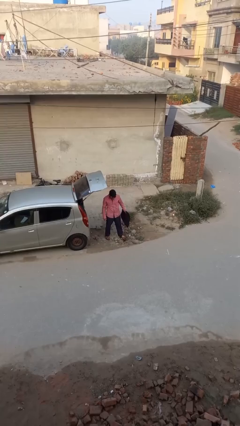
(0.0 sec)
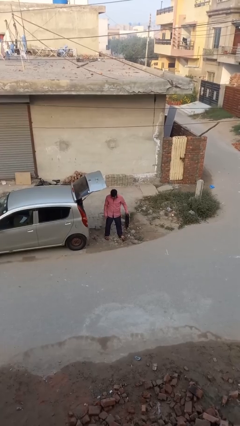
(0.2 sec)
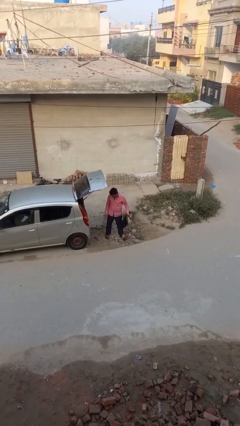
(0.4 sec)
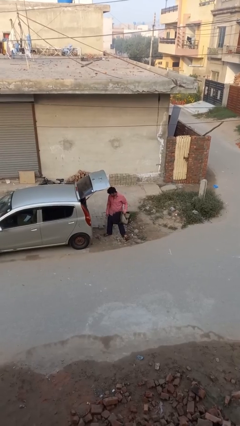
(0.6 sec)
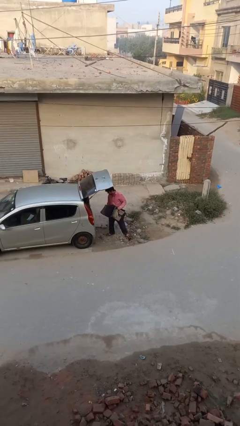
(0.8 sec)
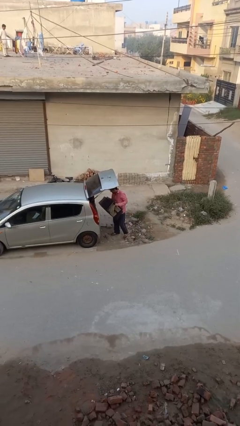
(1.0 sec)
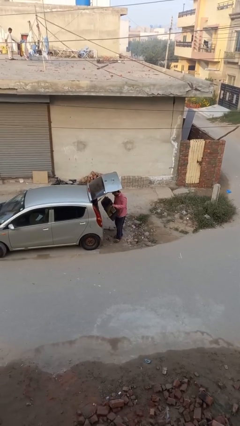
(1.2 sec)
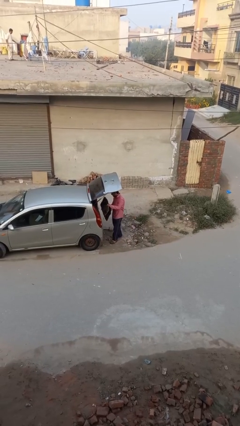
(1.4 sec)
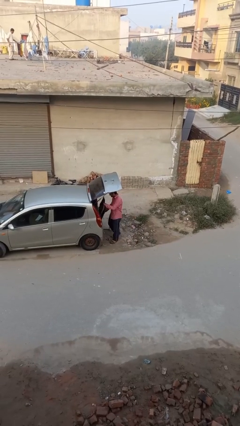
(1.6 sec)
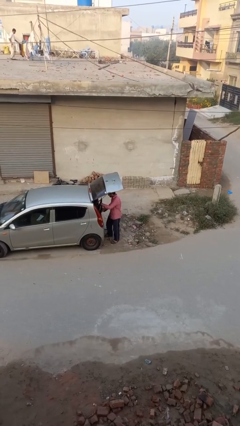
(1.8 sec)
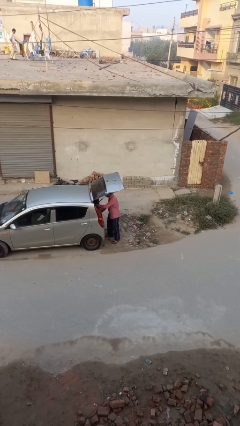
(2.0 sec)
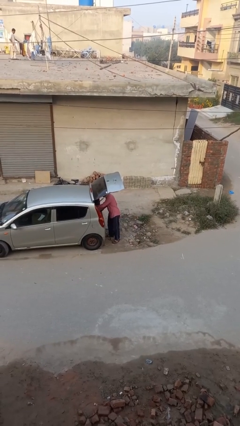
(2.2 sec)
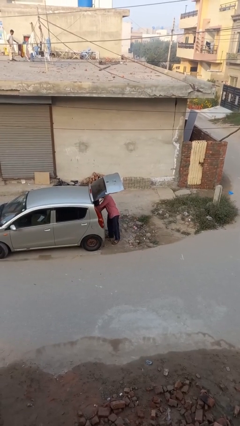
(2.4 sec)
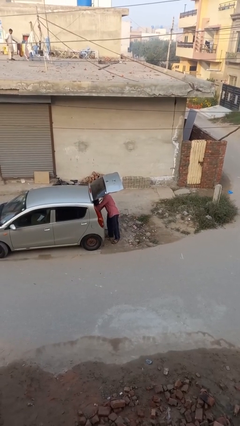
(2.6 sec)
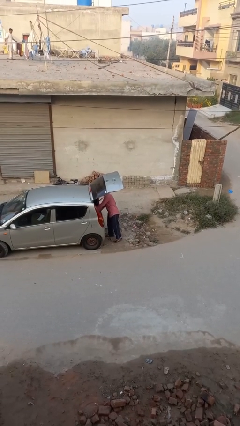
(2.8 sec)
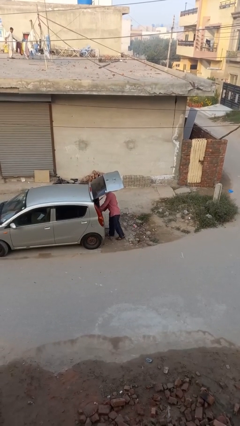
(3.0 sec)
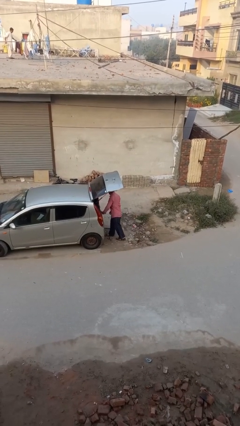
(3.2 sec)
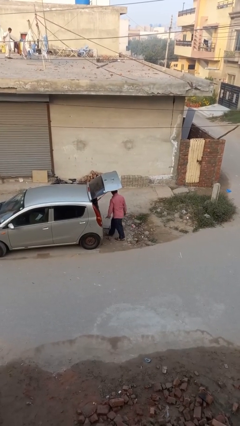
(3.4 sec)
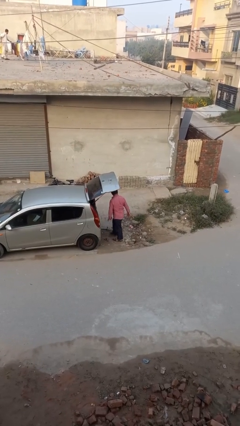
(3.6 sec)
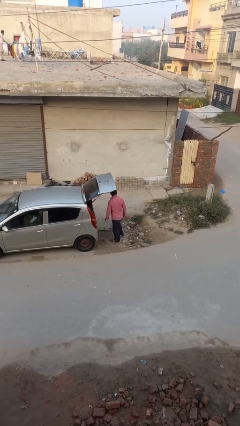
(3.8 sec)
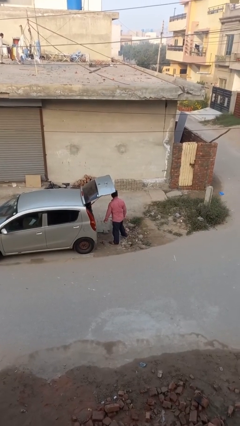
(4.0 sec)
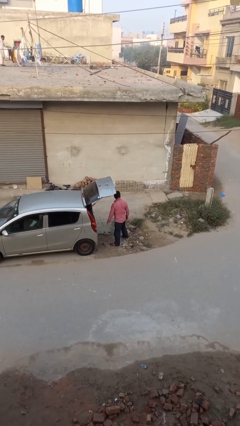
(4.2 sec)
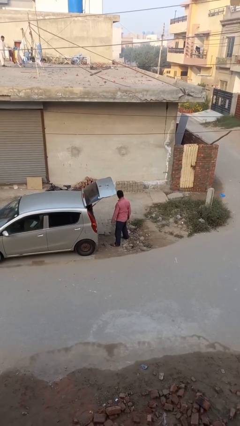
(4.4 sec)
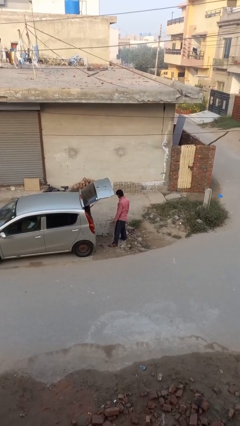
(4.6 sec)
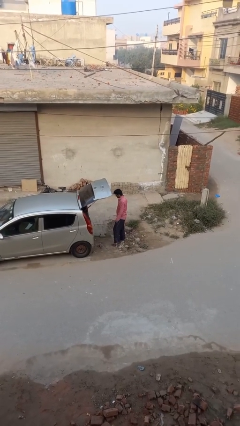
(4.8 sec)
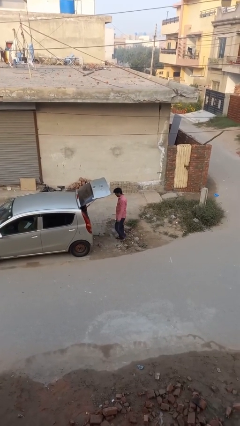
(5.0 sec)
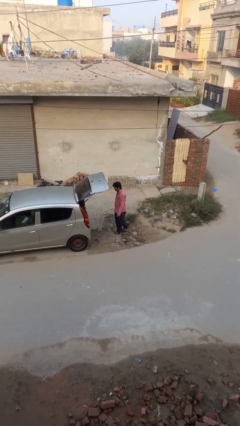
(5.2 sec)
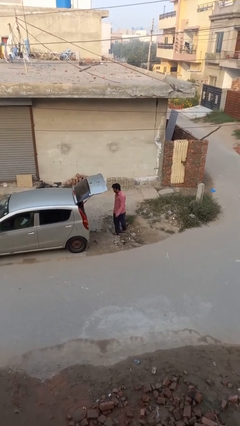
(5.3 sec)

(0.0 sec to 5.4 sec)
person loads car

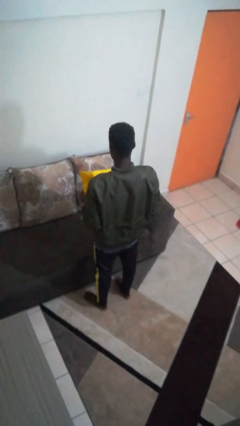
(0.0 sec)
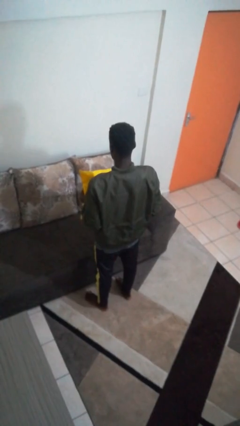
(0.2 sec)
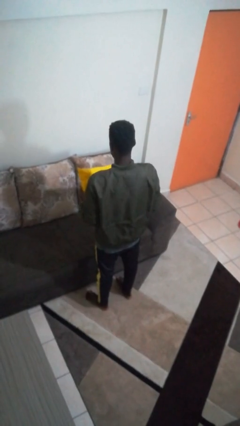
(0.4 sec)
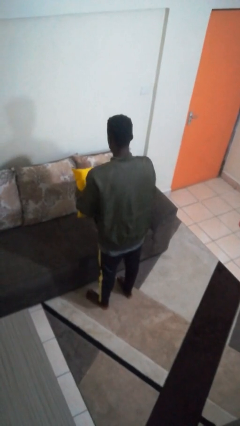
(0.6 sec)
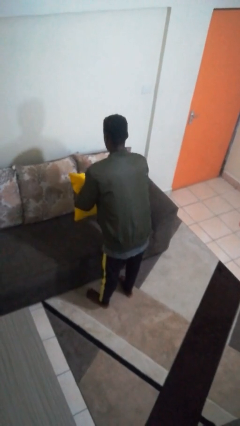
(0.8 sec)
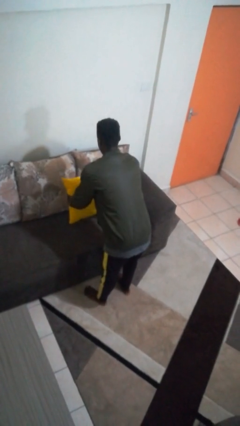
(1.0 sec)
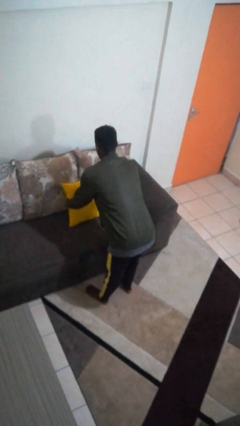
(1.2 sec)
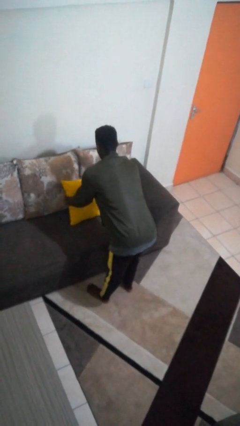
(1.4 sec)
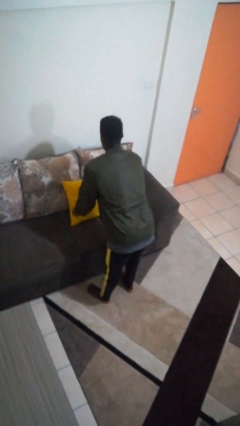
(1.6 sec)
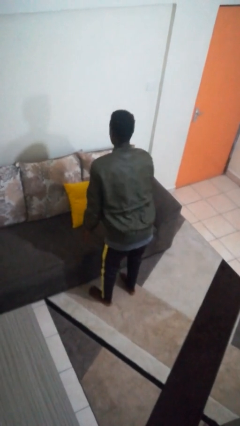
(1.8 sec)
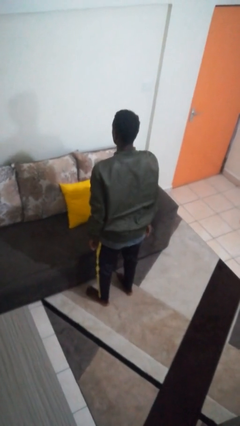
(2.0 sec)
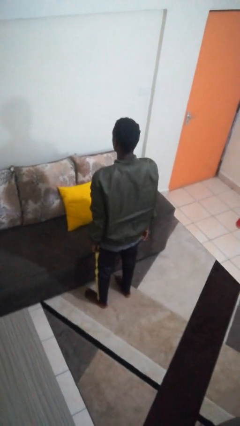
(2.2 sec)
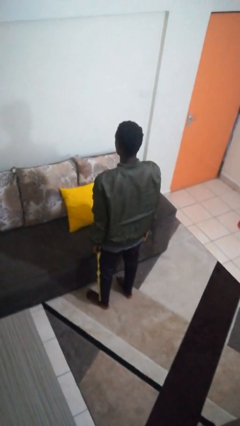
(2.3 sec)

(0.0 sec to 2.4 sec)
person puts down object on couch

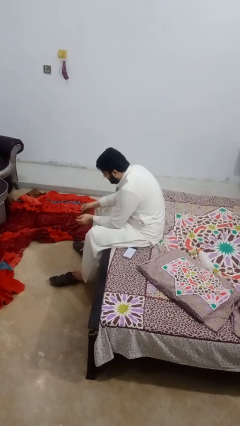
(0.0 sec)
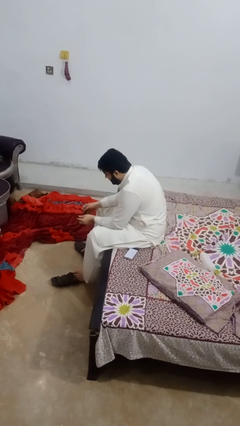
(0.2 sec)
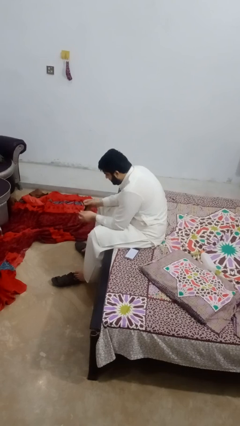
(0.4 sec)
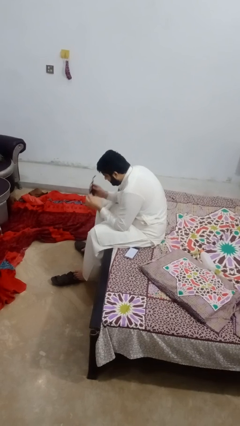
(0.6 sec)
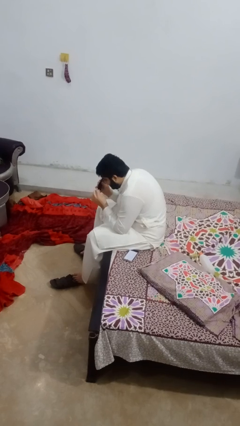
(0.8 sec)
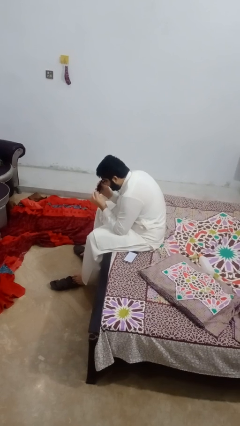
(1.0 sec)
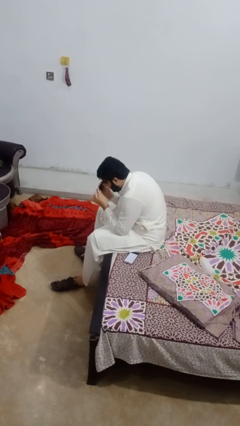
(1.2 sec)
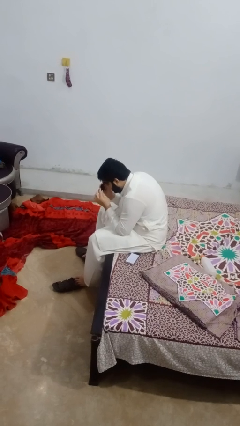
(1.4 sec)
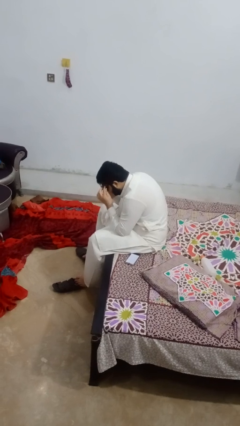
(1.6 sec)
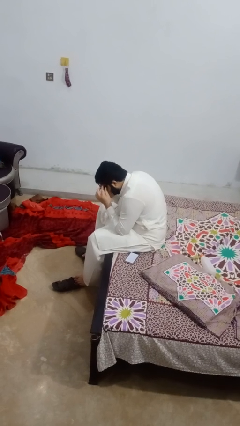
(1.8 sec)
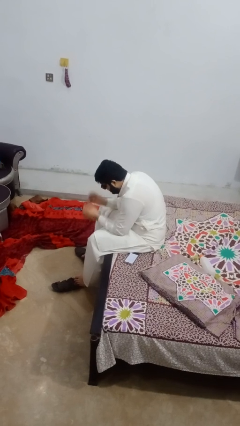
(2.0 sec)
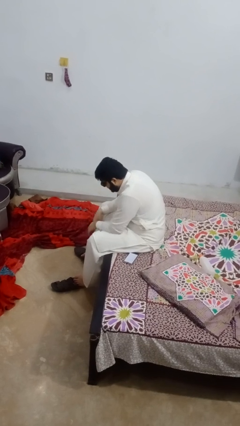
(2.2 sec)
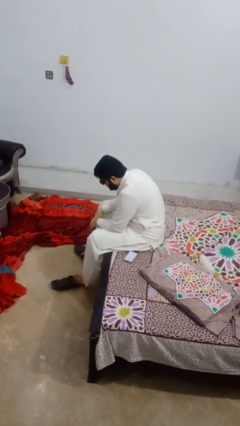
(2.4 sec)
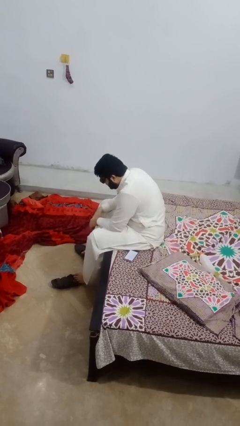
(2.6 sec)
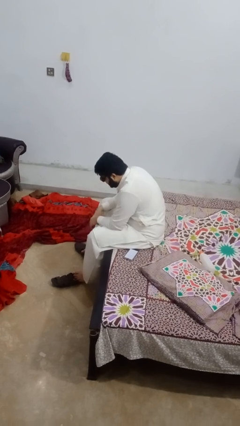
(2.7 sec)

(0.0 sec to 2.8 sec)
person puts on glasses

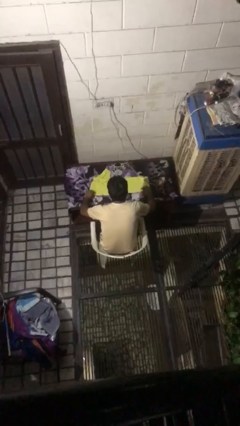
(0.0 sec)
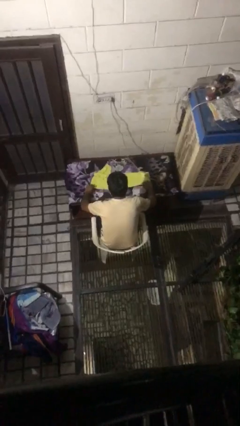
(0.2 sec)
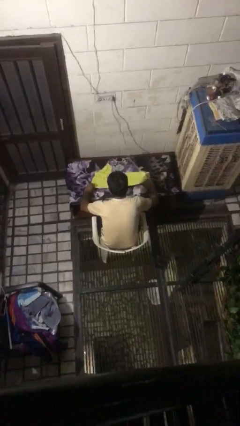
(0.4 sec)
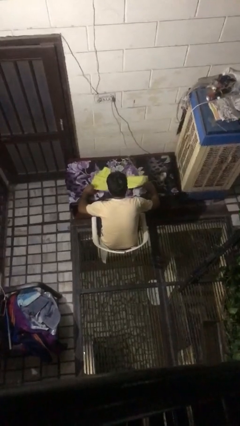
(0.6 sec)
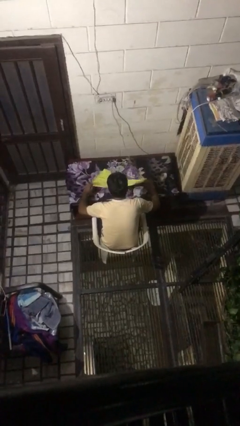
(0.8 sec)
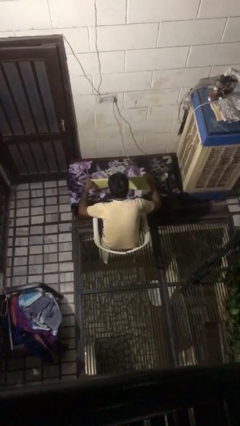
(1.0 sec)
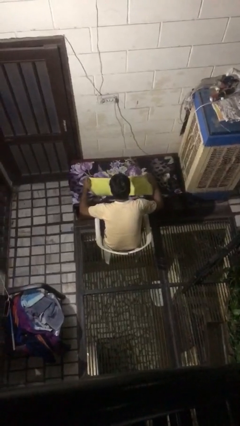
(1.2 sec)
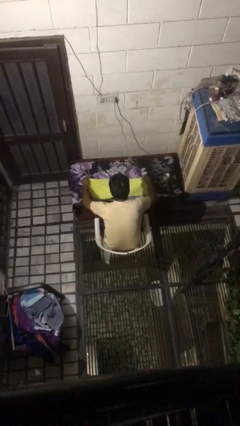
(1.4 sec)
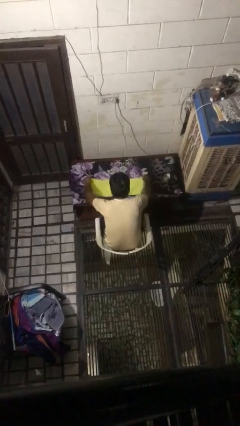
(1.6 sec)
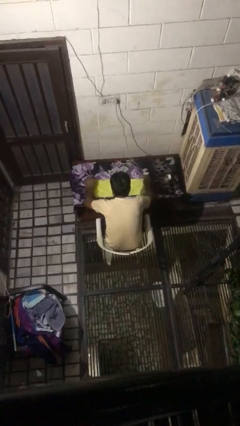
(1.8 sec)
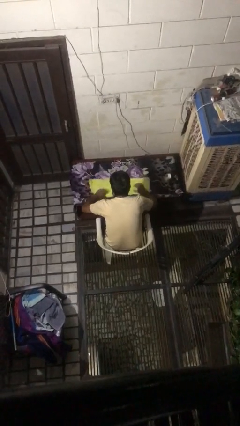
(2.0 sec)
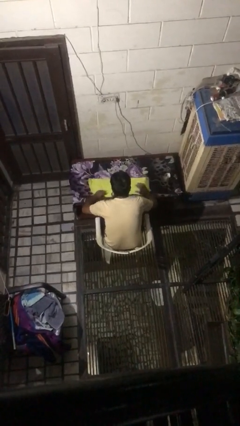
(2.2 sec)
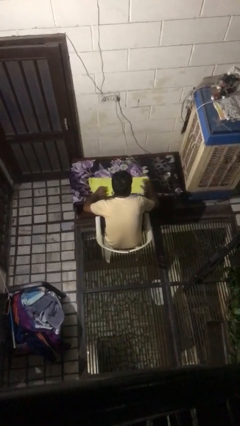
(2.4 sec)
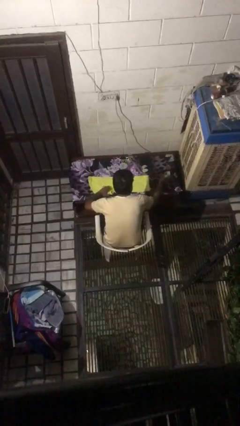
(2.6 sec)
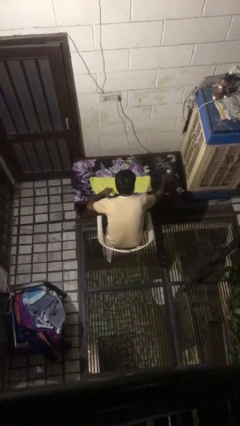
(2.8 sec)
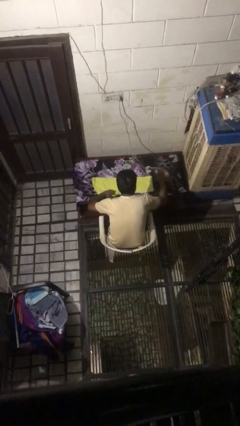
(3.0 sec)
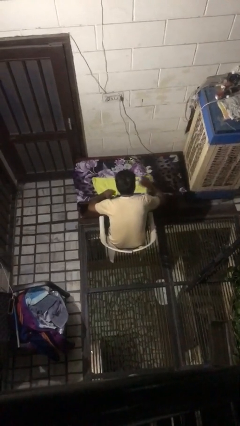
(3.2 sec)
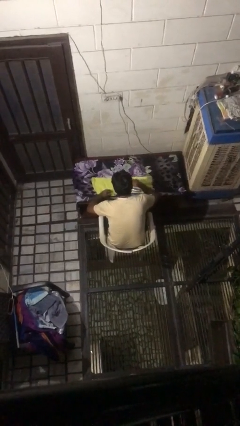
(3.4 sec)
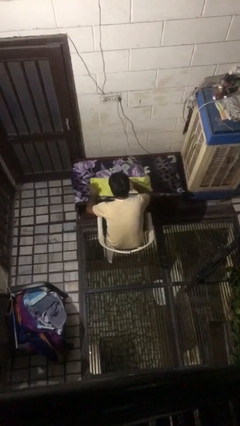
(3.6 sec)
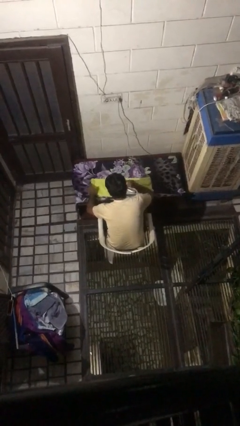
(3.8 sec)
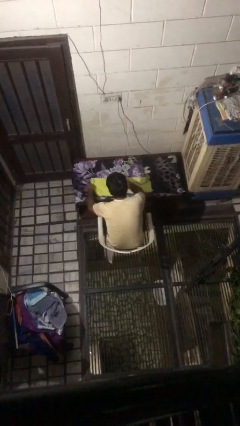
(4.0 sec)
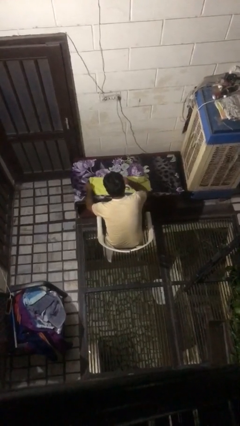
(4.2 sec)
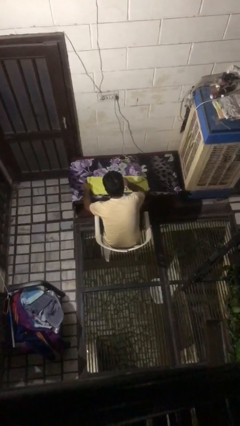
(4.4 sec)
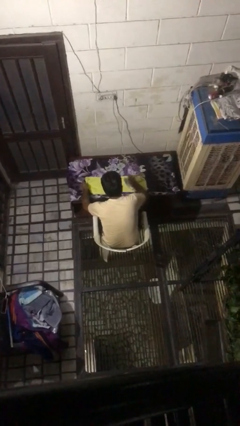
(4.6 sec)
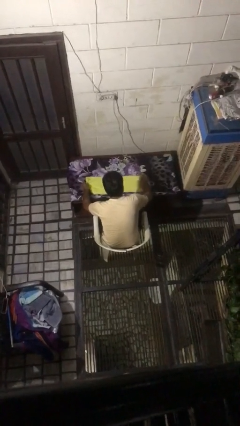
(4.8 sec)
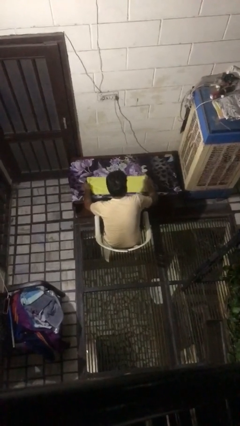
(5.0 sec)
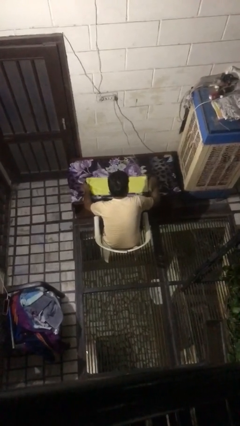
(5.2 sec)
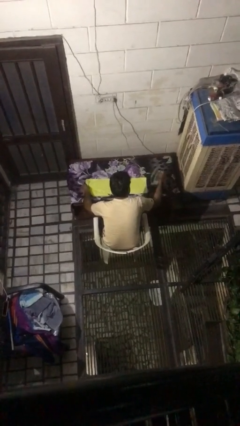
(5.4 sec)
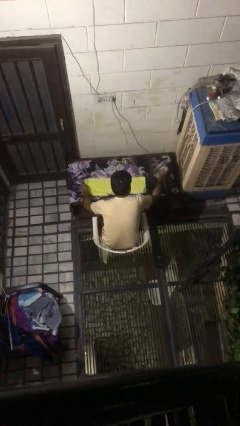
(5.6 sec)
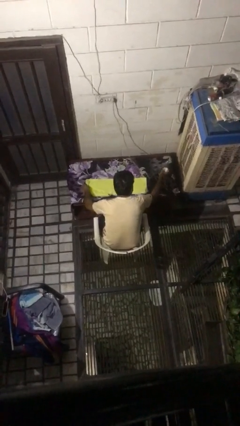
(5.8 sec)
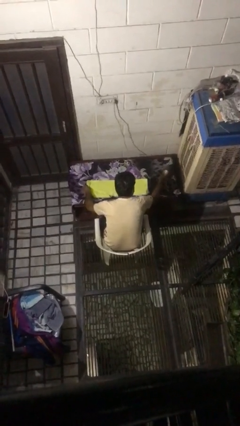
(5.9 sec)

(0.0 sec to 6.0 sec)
person irons clothes

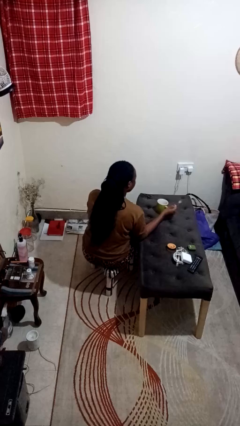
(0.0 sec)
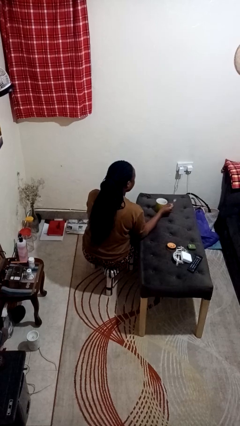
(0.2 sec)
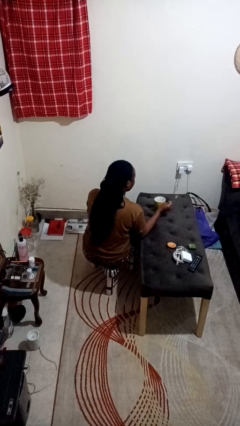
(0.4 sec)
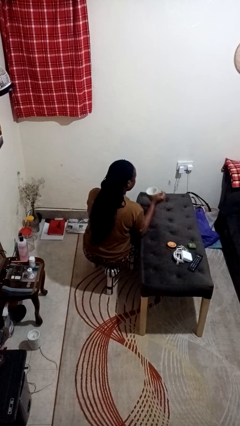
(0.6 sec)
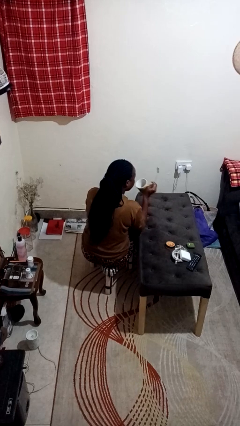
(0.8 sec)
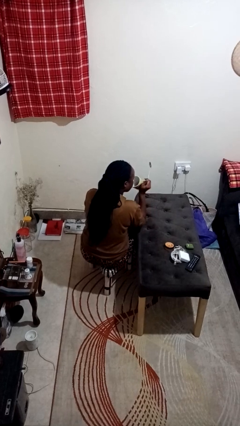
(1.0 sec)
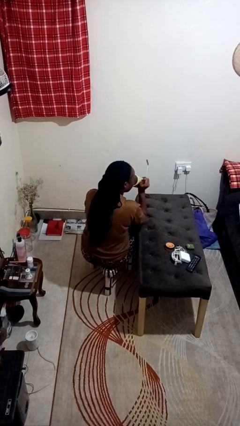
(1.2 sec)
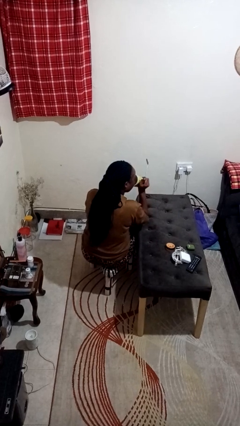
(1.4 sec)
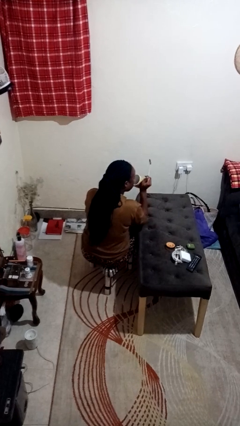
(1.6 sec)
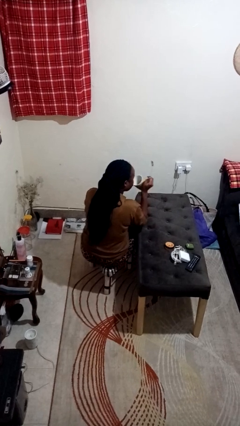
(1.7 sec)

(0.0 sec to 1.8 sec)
person drinks from mug
